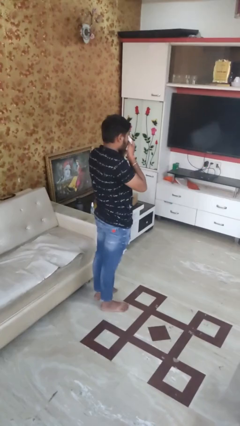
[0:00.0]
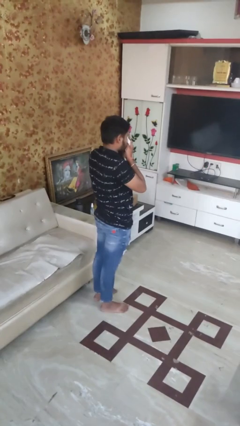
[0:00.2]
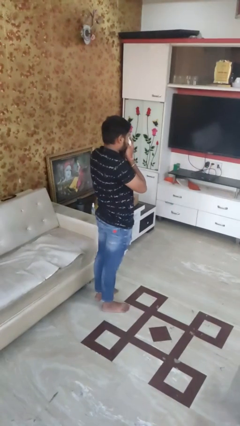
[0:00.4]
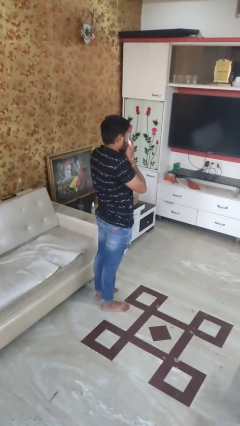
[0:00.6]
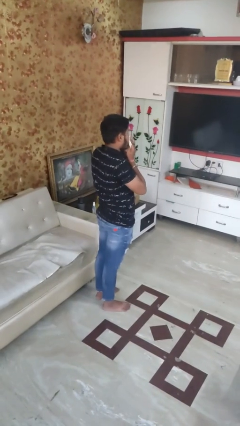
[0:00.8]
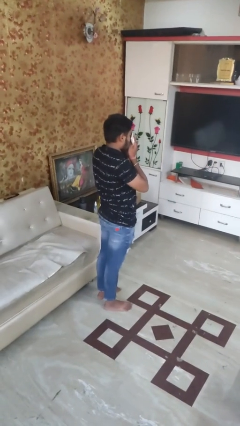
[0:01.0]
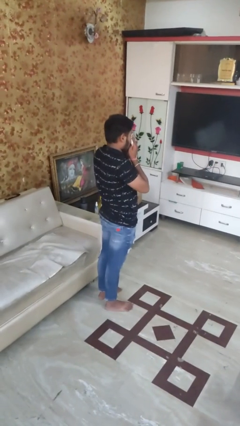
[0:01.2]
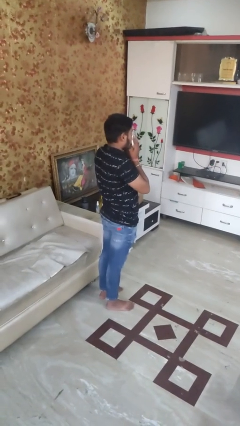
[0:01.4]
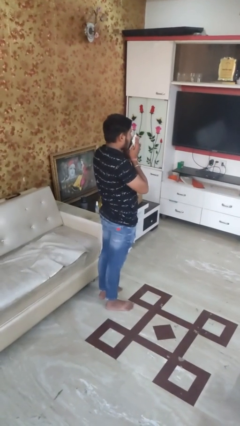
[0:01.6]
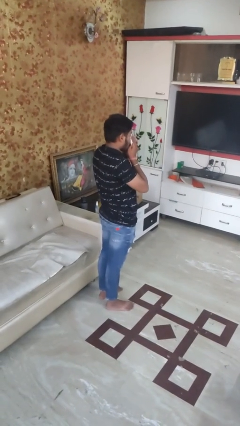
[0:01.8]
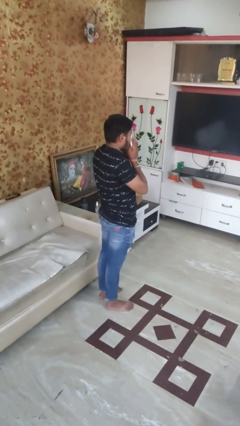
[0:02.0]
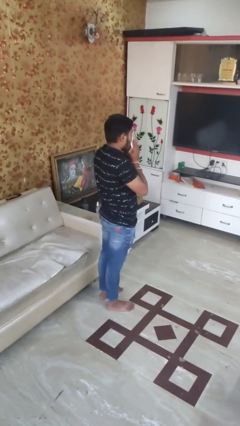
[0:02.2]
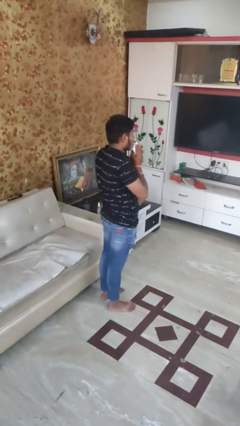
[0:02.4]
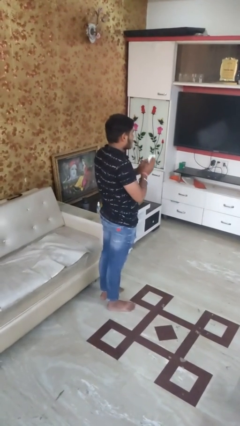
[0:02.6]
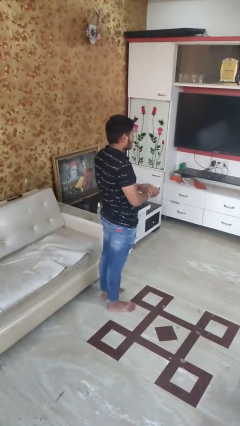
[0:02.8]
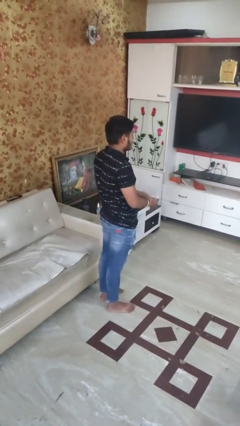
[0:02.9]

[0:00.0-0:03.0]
person wipes mouth with napkin

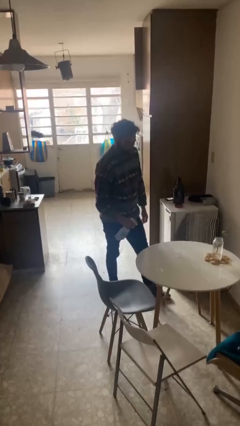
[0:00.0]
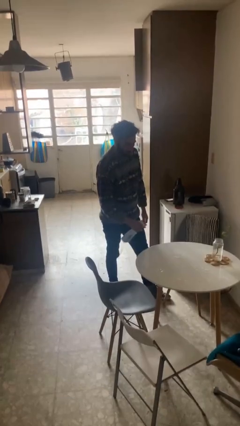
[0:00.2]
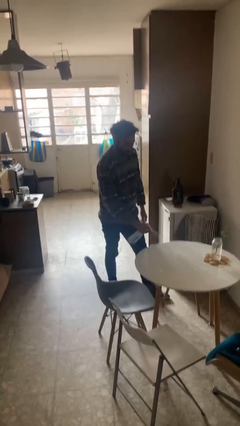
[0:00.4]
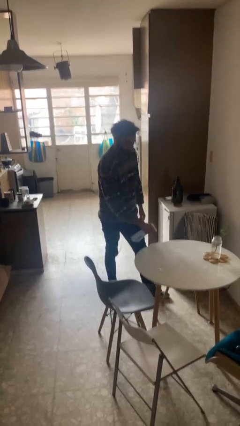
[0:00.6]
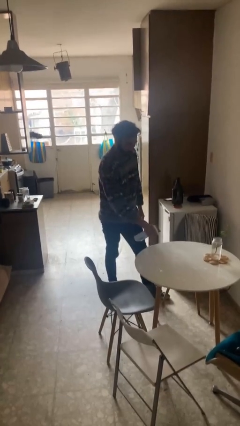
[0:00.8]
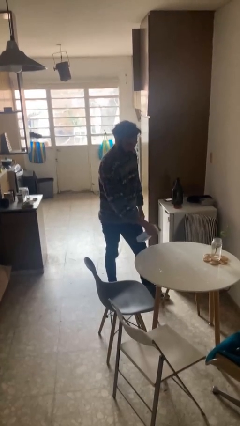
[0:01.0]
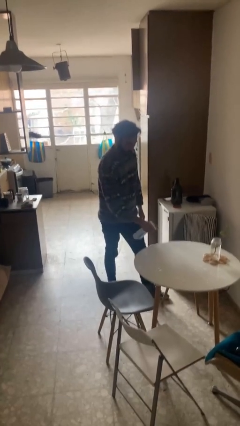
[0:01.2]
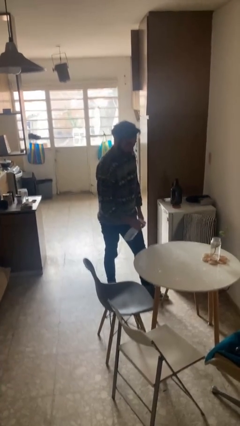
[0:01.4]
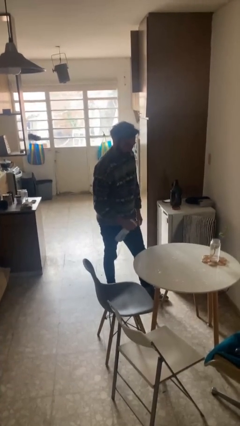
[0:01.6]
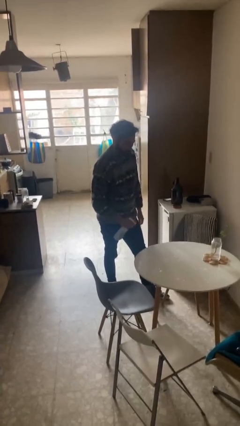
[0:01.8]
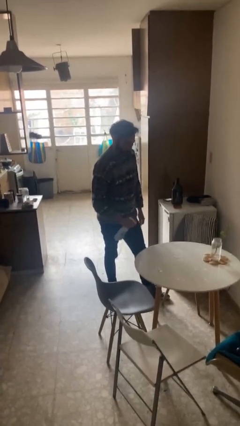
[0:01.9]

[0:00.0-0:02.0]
person sprays from bottle

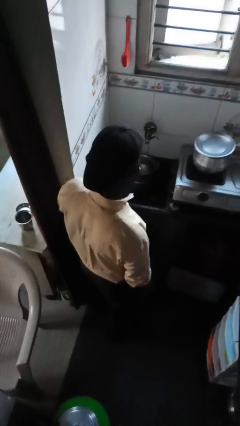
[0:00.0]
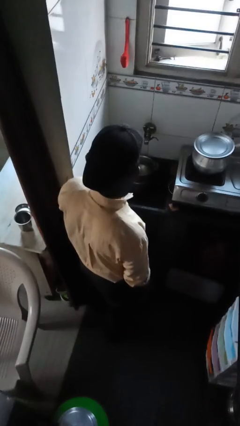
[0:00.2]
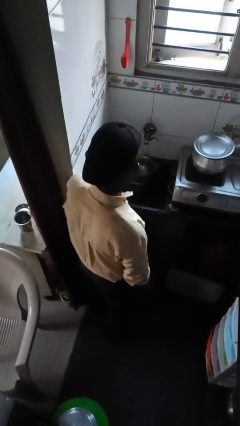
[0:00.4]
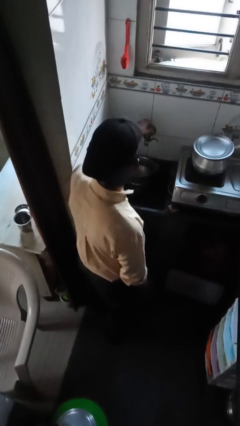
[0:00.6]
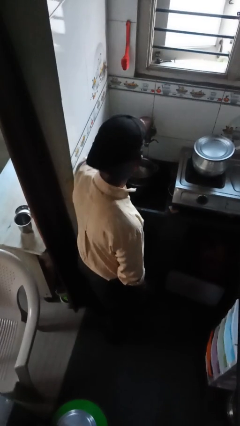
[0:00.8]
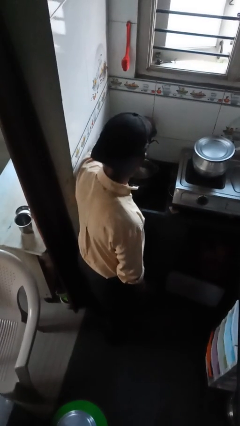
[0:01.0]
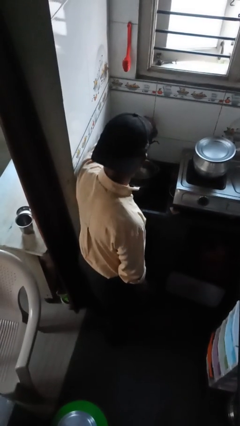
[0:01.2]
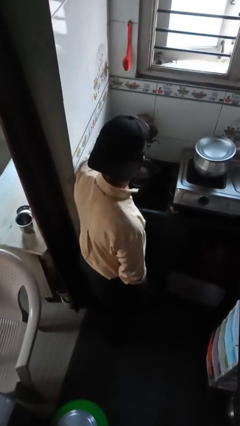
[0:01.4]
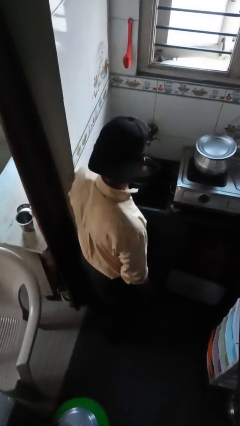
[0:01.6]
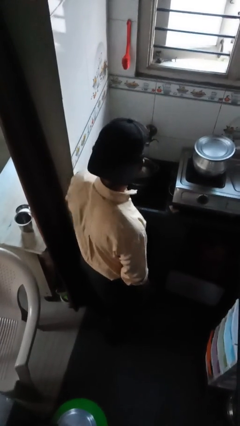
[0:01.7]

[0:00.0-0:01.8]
person turns off faucet

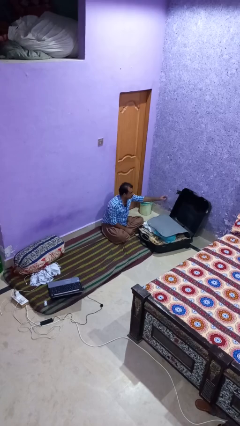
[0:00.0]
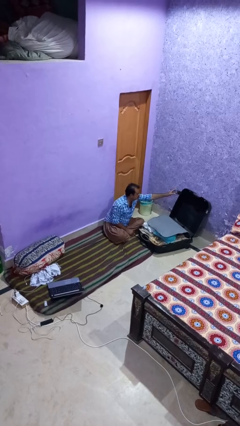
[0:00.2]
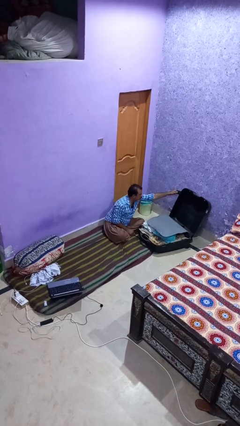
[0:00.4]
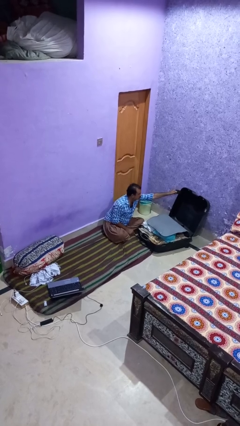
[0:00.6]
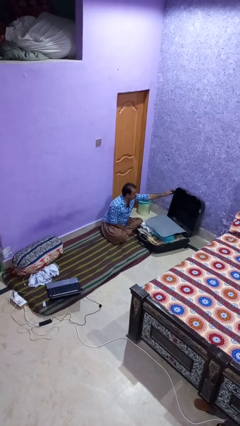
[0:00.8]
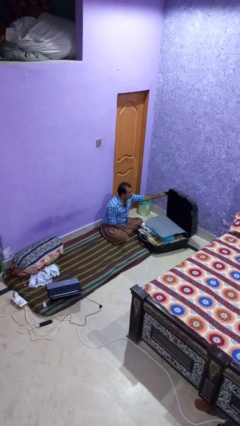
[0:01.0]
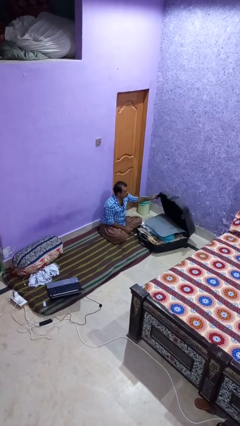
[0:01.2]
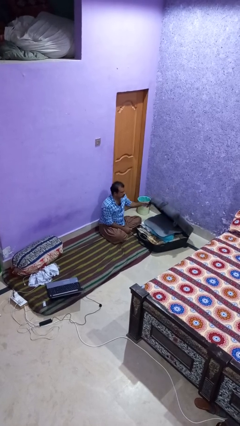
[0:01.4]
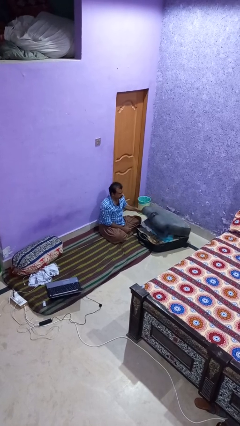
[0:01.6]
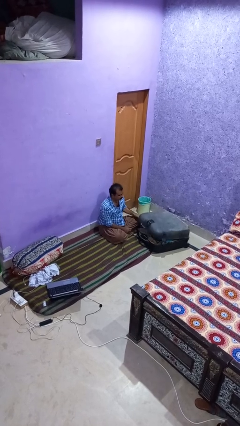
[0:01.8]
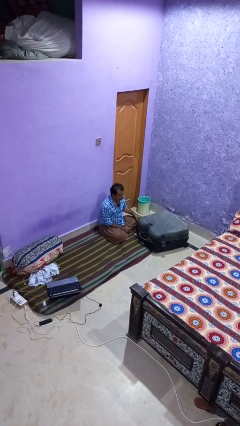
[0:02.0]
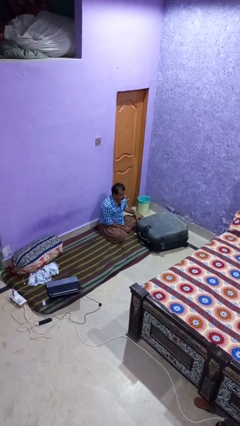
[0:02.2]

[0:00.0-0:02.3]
person closes suitcase

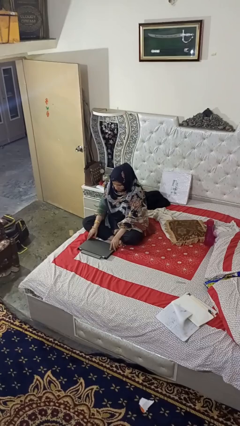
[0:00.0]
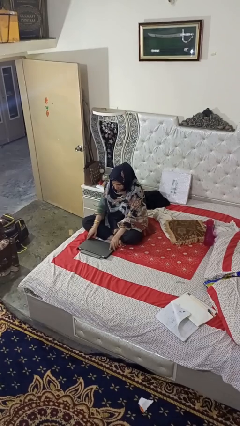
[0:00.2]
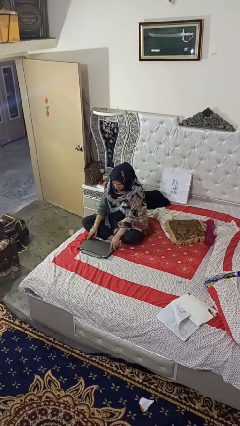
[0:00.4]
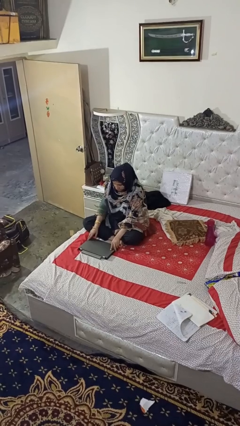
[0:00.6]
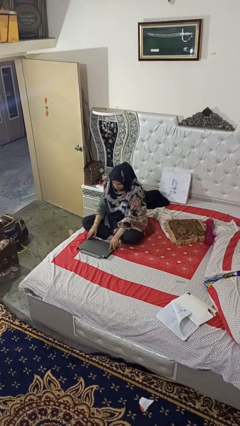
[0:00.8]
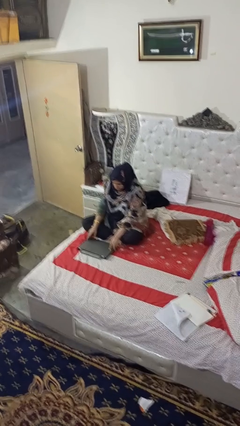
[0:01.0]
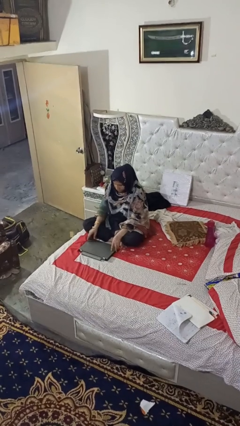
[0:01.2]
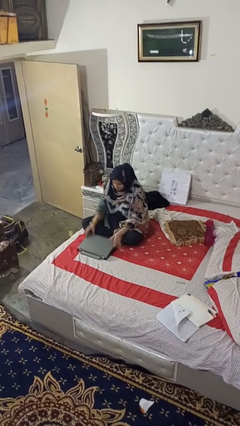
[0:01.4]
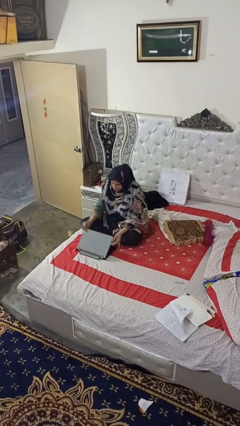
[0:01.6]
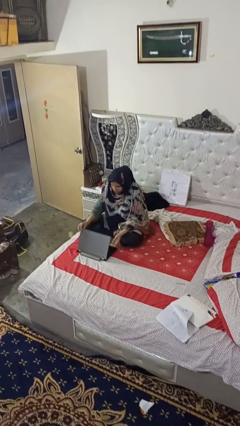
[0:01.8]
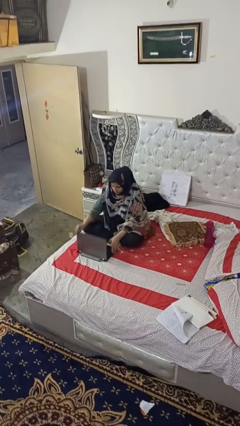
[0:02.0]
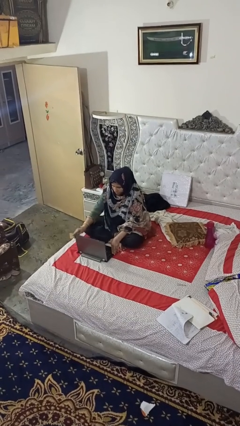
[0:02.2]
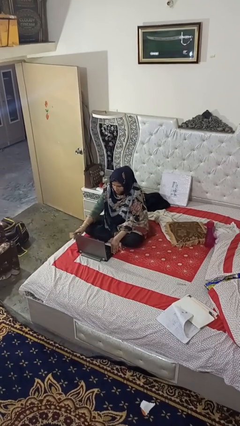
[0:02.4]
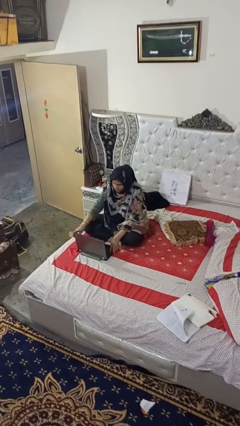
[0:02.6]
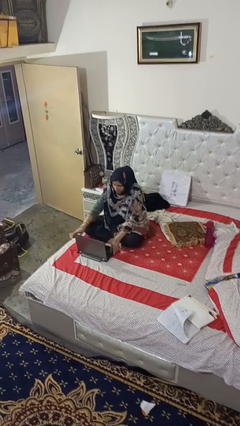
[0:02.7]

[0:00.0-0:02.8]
person opens laptop

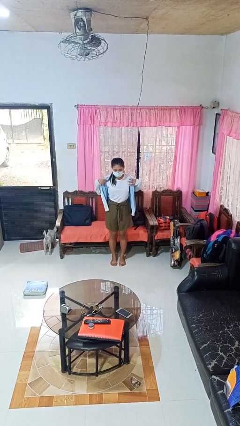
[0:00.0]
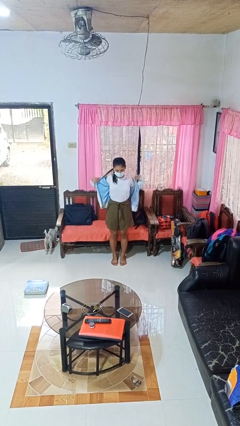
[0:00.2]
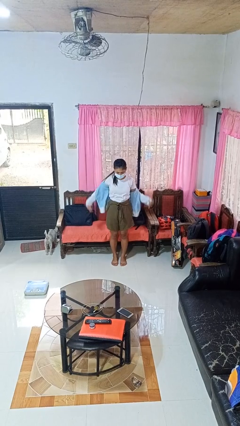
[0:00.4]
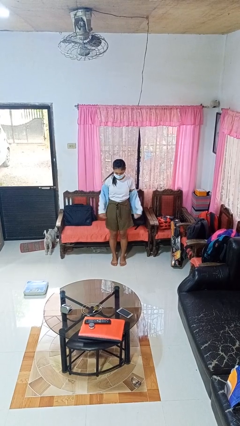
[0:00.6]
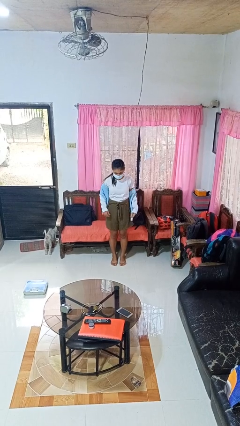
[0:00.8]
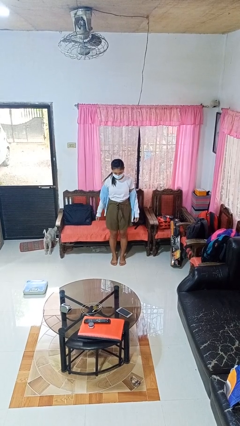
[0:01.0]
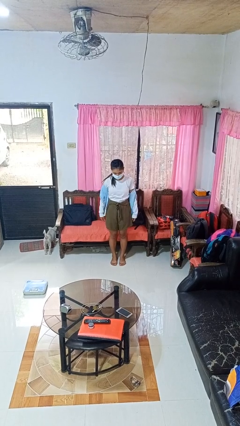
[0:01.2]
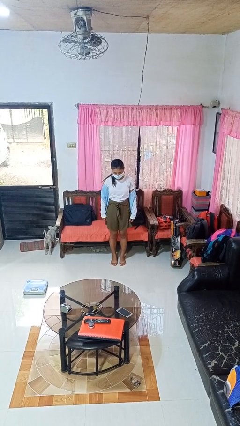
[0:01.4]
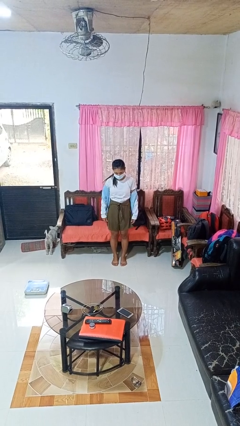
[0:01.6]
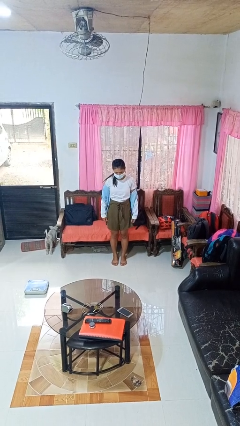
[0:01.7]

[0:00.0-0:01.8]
person takes off jacket

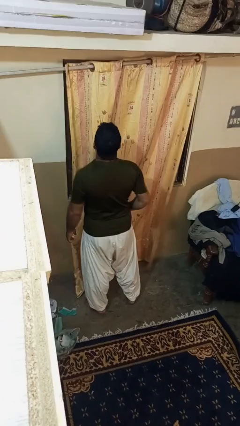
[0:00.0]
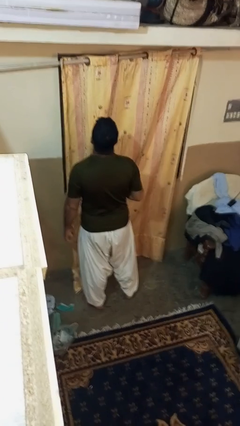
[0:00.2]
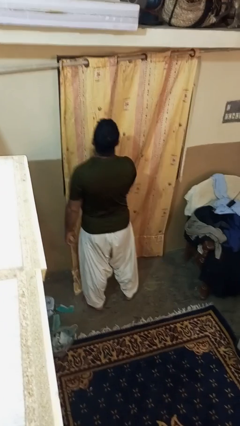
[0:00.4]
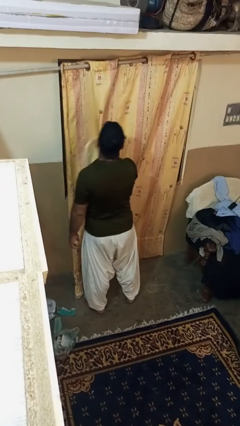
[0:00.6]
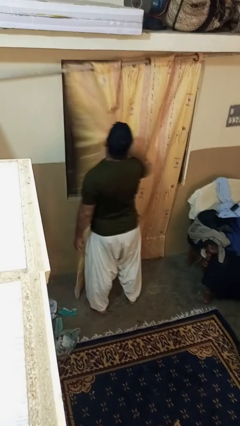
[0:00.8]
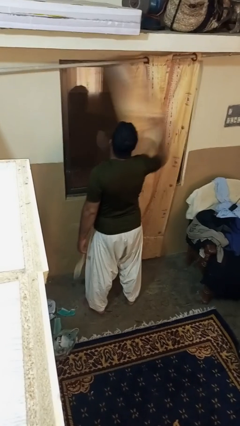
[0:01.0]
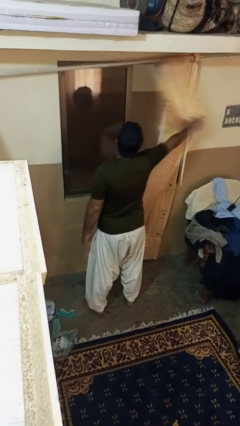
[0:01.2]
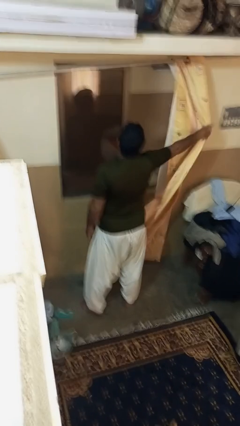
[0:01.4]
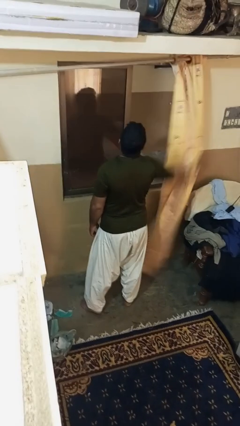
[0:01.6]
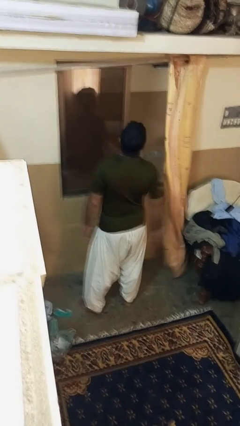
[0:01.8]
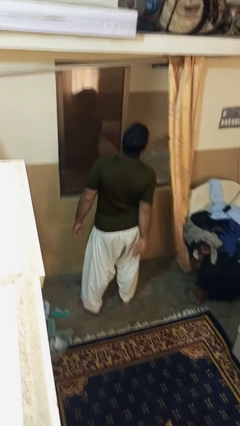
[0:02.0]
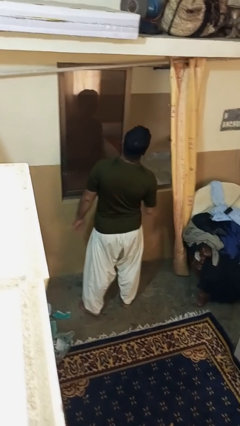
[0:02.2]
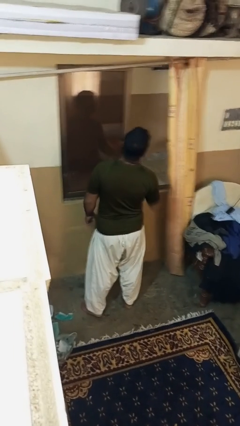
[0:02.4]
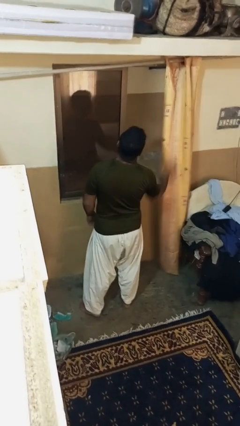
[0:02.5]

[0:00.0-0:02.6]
person opens curtains

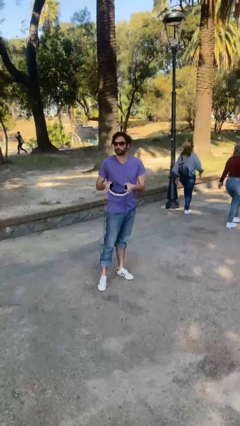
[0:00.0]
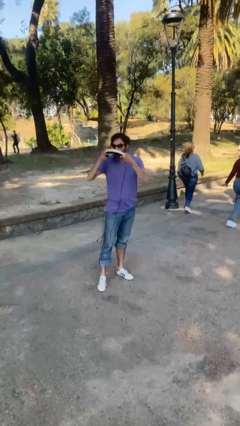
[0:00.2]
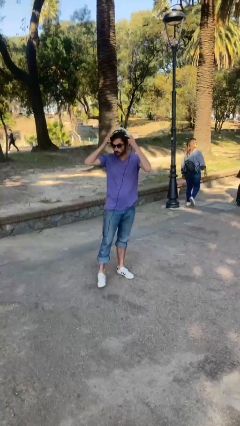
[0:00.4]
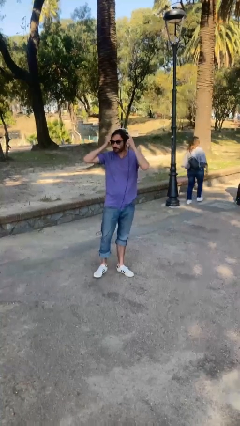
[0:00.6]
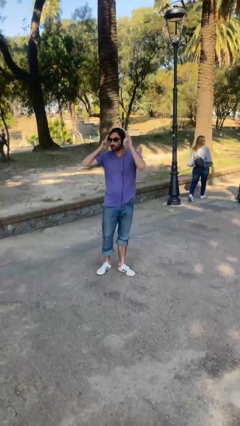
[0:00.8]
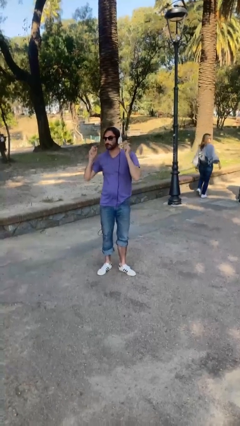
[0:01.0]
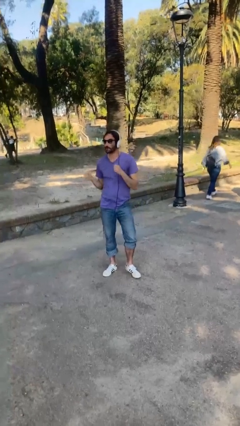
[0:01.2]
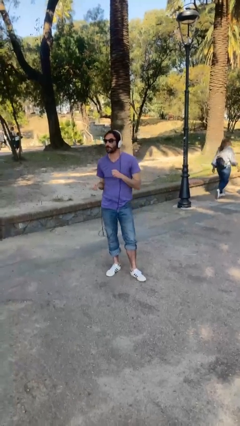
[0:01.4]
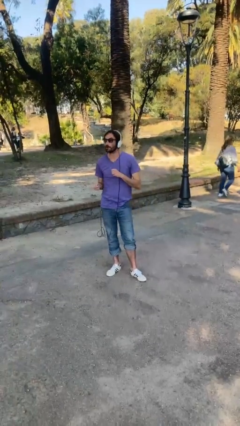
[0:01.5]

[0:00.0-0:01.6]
person puts on headphones
